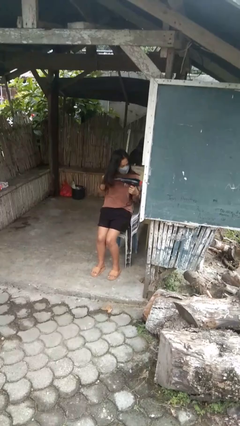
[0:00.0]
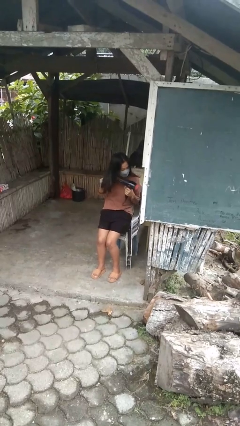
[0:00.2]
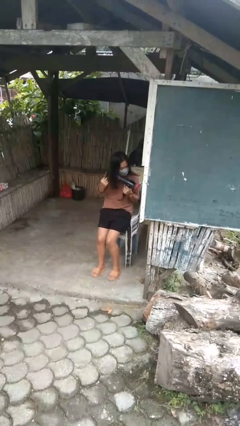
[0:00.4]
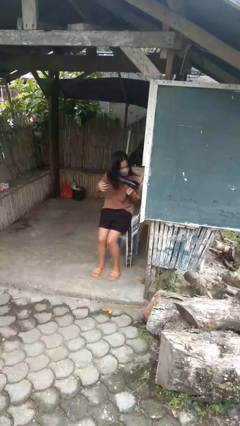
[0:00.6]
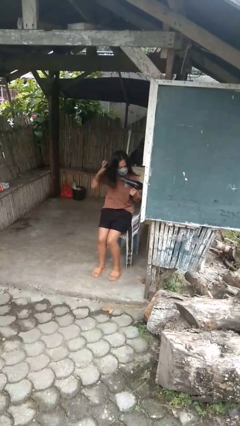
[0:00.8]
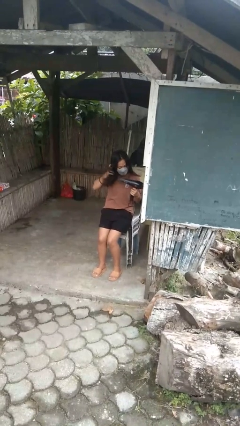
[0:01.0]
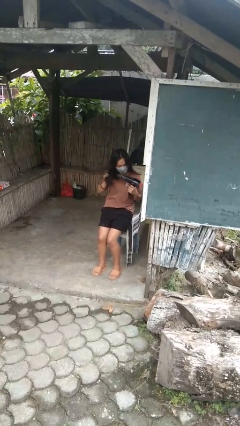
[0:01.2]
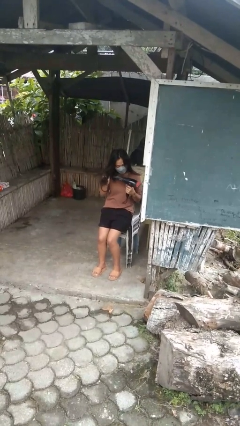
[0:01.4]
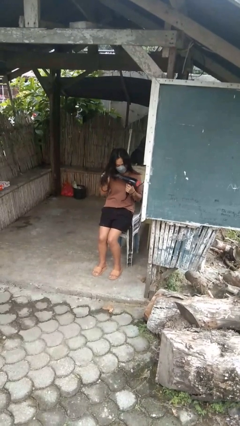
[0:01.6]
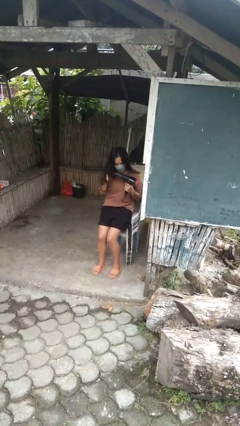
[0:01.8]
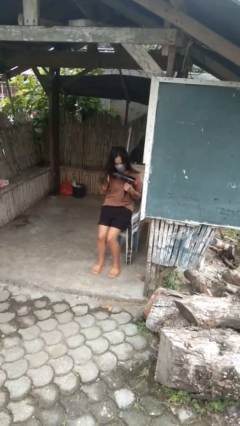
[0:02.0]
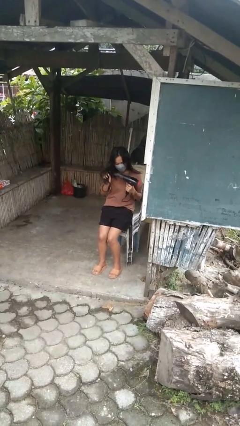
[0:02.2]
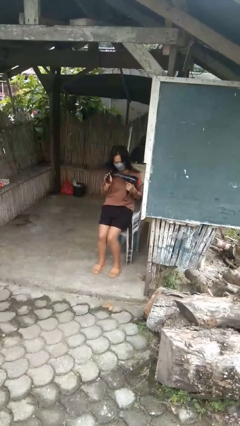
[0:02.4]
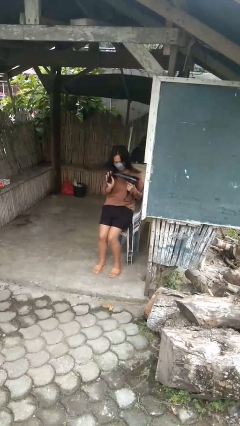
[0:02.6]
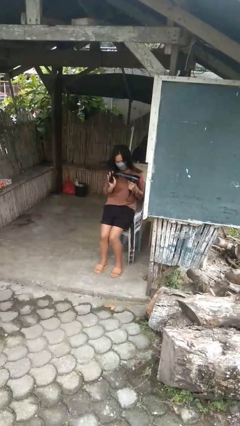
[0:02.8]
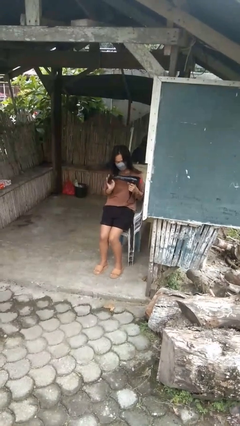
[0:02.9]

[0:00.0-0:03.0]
person dries hair with hairdryer

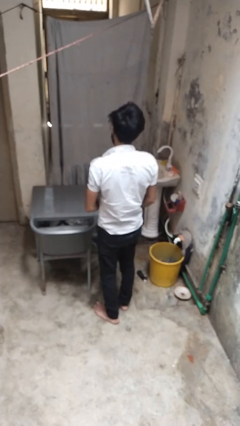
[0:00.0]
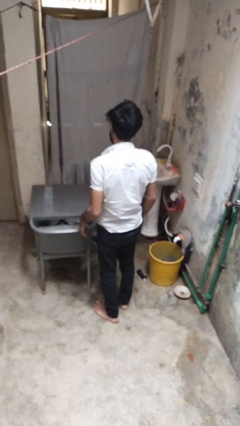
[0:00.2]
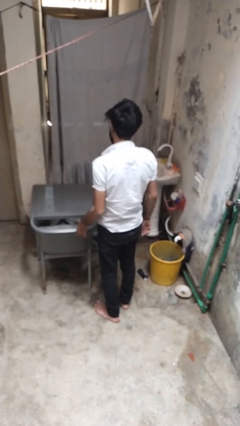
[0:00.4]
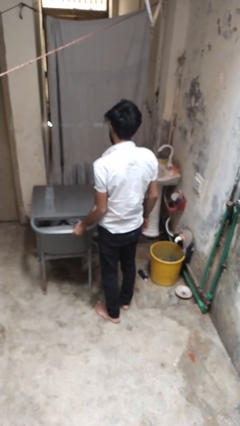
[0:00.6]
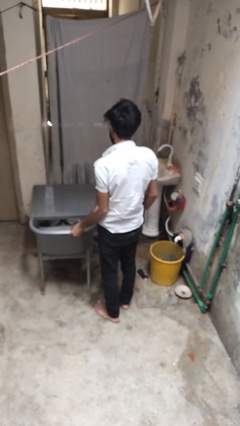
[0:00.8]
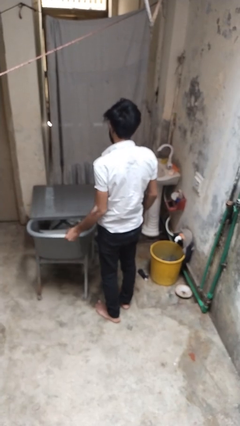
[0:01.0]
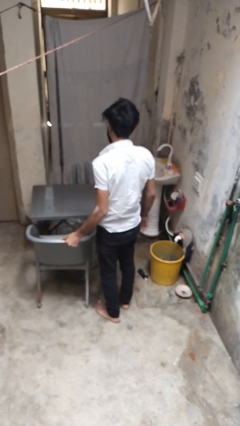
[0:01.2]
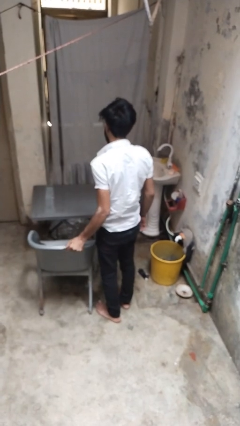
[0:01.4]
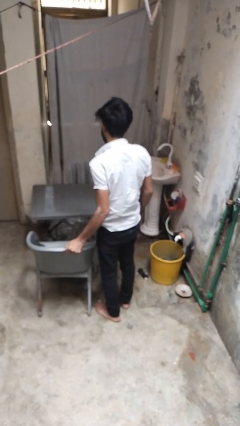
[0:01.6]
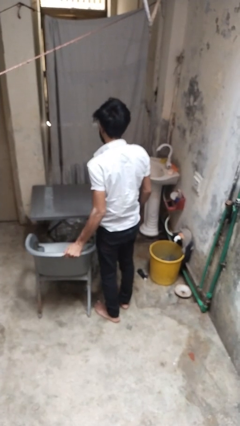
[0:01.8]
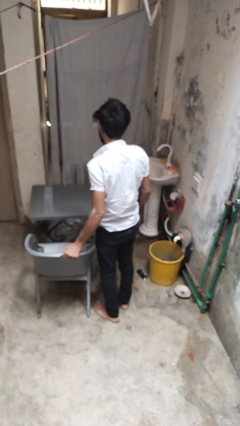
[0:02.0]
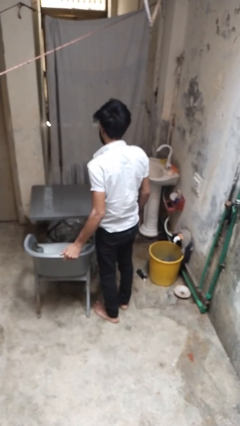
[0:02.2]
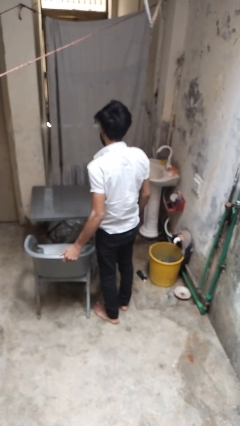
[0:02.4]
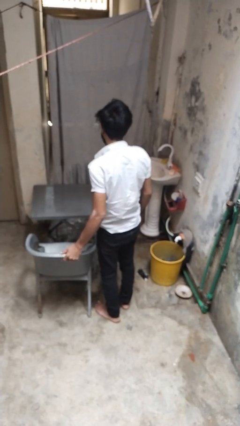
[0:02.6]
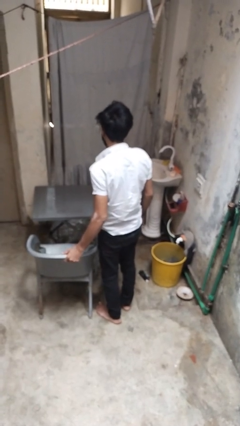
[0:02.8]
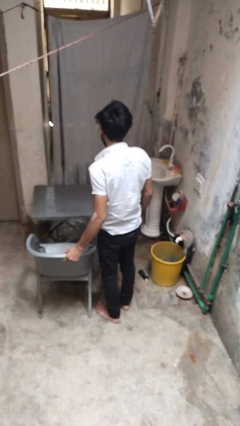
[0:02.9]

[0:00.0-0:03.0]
person pulls out chair

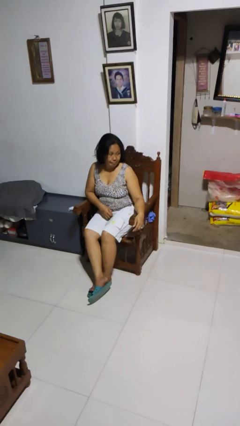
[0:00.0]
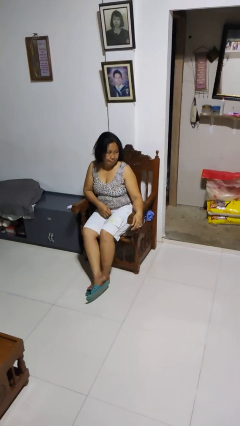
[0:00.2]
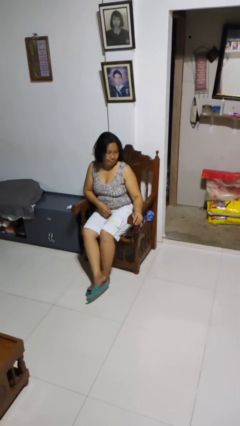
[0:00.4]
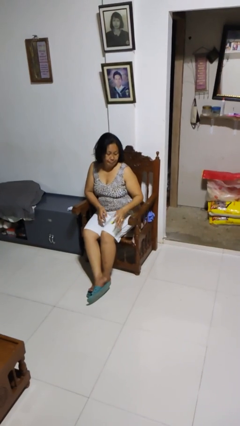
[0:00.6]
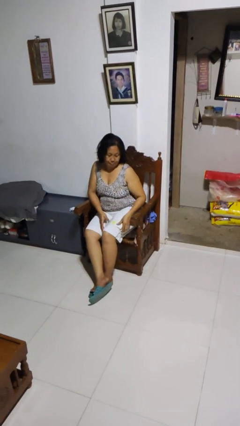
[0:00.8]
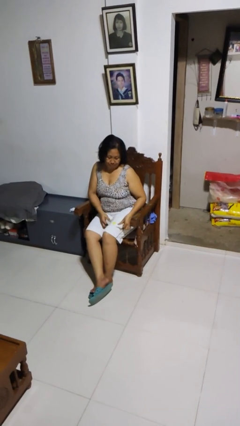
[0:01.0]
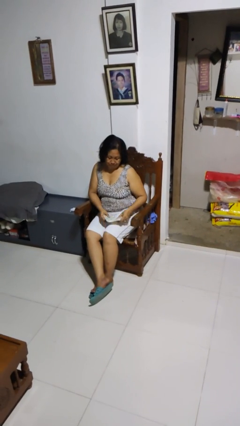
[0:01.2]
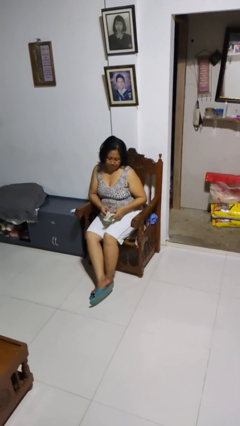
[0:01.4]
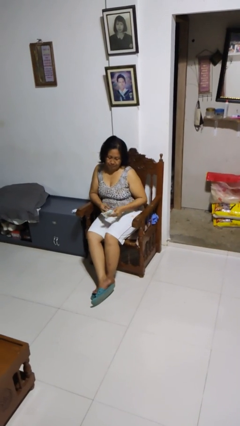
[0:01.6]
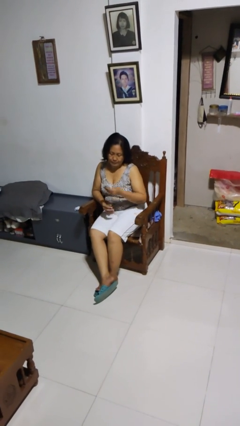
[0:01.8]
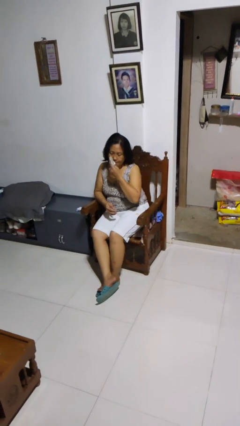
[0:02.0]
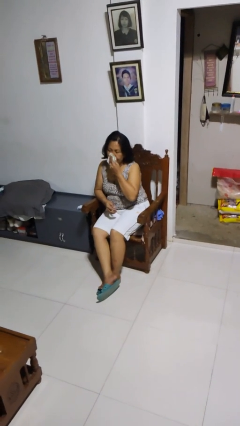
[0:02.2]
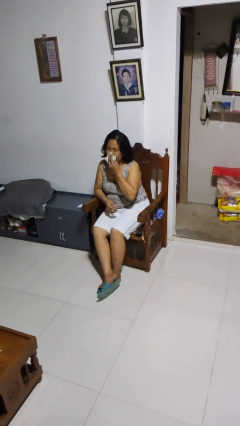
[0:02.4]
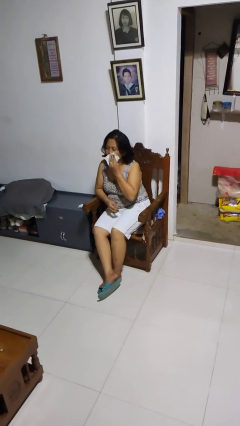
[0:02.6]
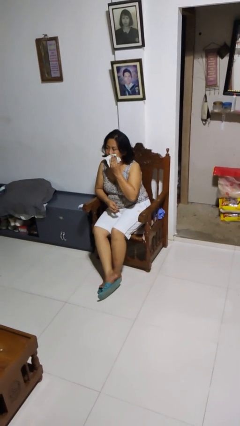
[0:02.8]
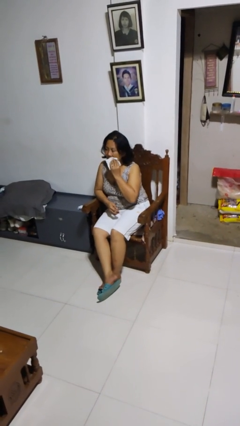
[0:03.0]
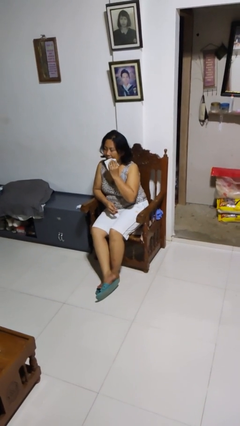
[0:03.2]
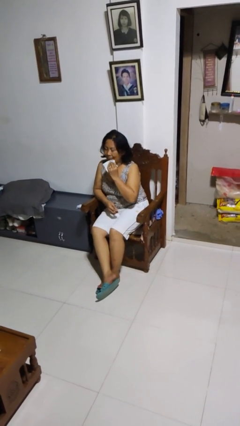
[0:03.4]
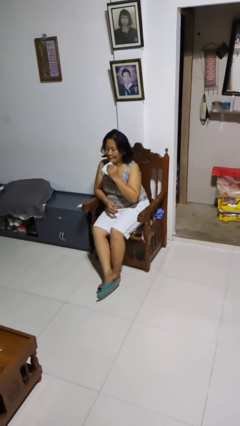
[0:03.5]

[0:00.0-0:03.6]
person wipes mouth with napkin

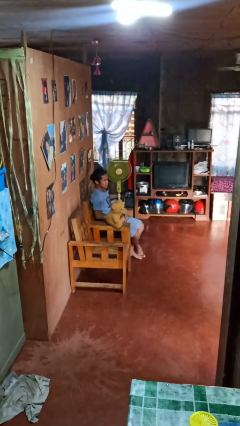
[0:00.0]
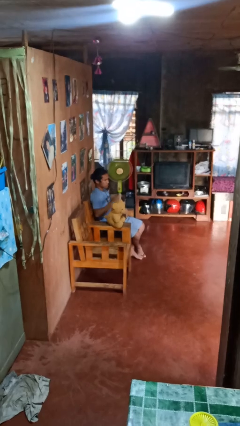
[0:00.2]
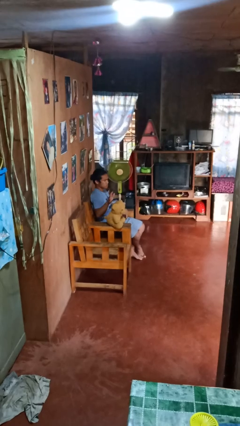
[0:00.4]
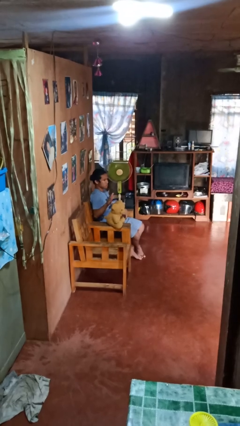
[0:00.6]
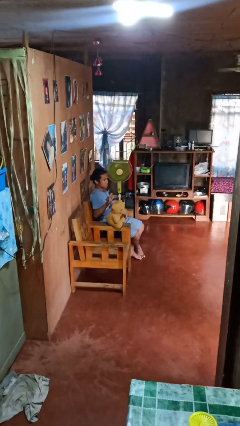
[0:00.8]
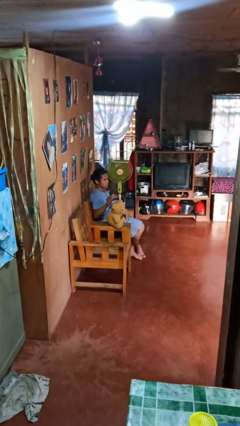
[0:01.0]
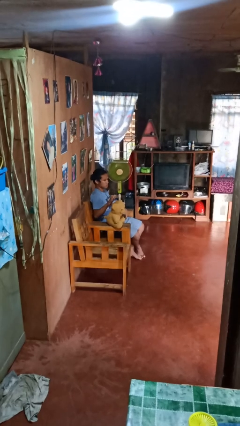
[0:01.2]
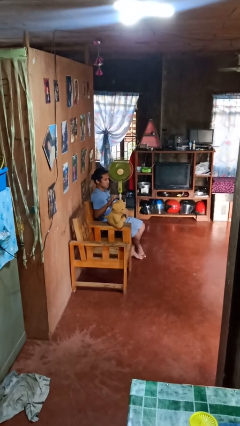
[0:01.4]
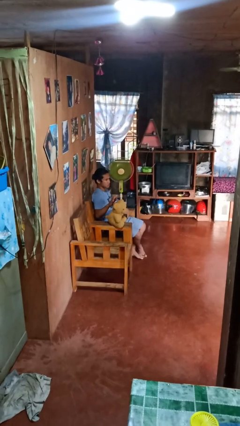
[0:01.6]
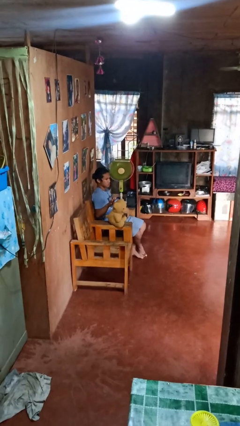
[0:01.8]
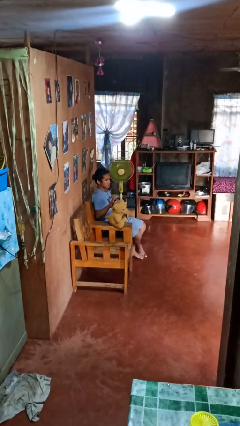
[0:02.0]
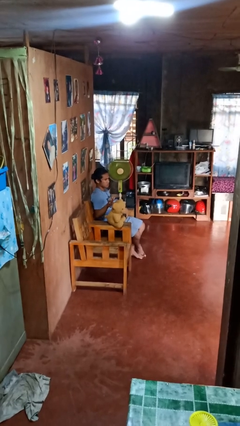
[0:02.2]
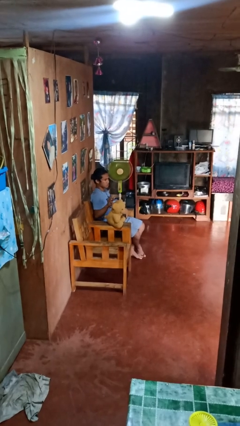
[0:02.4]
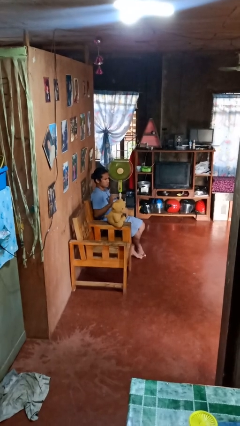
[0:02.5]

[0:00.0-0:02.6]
person waves hand over object

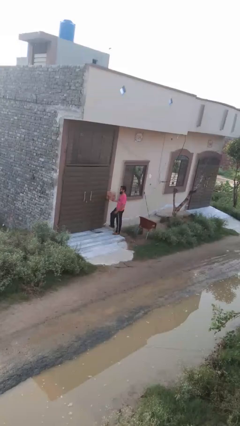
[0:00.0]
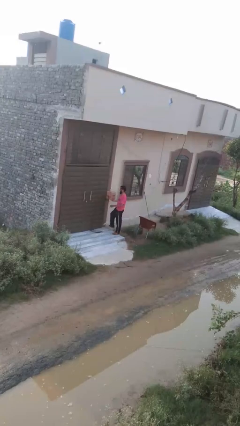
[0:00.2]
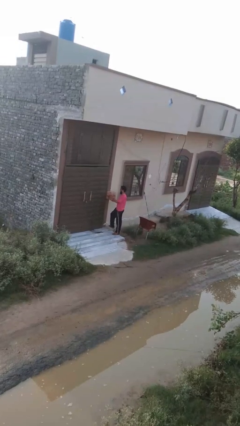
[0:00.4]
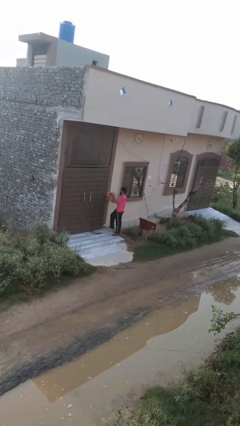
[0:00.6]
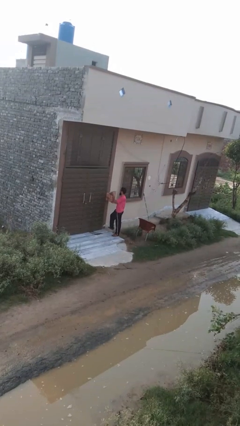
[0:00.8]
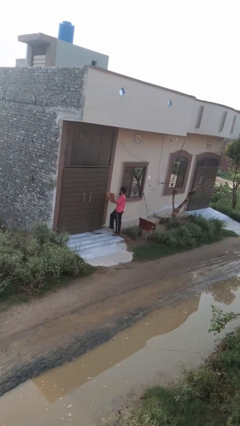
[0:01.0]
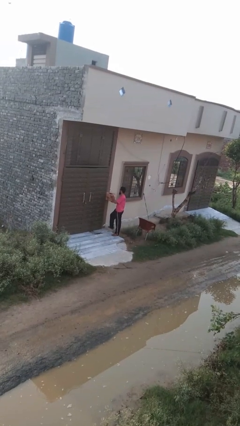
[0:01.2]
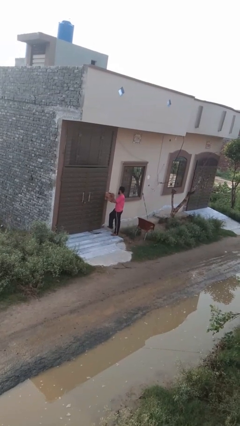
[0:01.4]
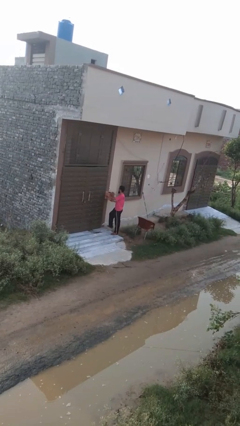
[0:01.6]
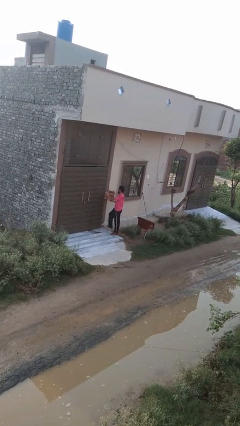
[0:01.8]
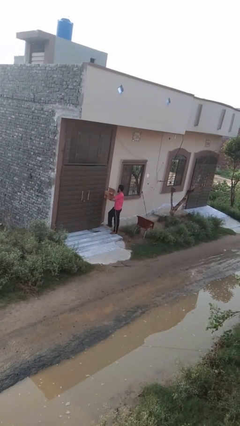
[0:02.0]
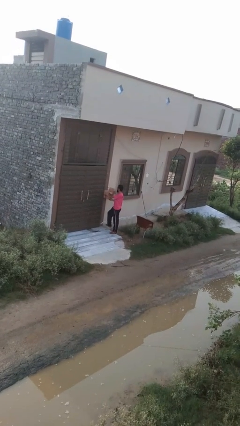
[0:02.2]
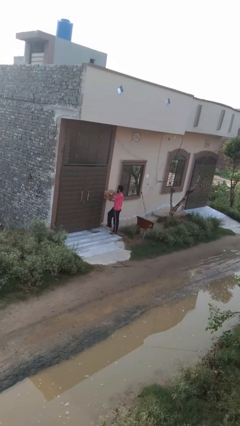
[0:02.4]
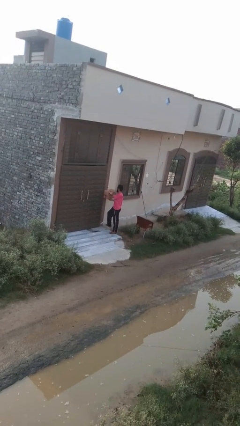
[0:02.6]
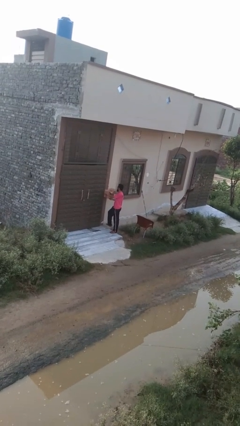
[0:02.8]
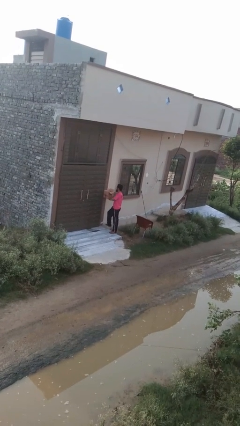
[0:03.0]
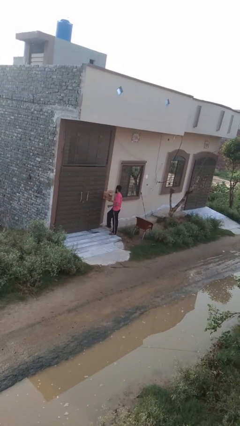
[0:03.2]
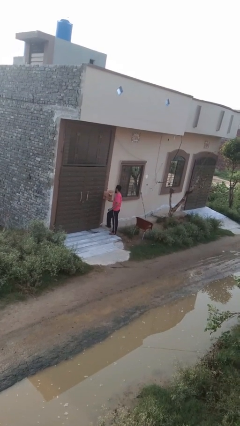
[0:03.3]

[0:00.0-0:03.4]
person opens mailbox

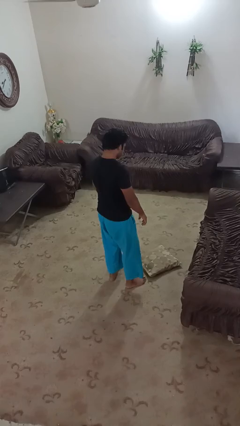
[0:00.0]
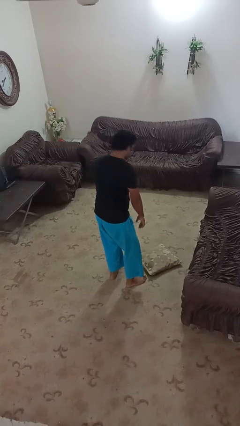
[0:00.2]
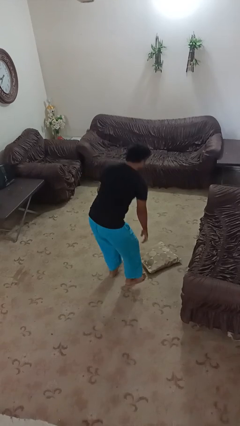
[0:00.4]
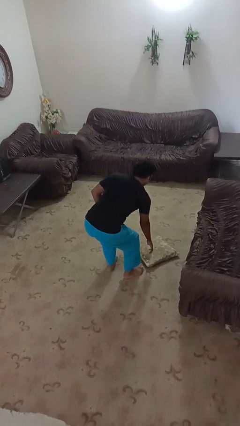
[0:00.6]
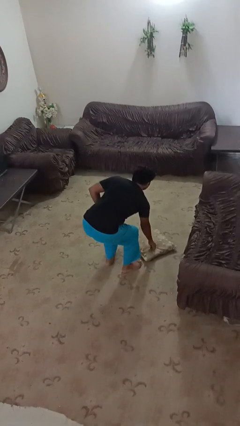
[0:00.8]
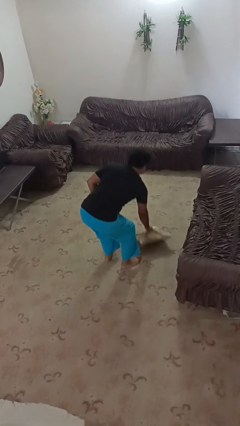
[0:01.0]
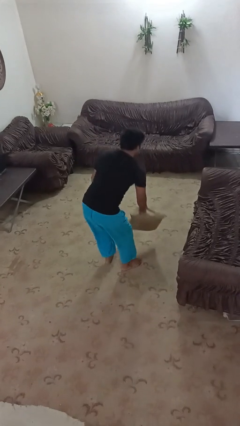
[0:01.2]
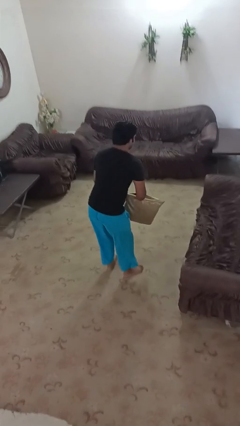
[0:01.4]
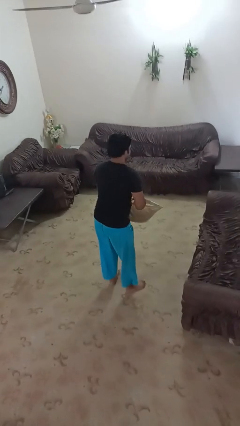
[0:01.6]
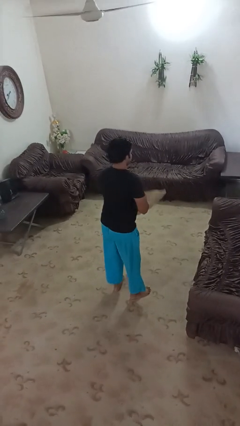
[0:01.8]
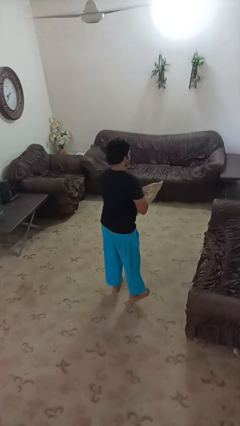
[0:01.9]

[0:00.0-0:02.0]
person picks up object from floor
